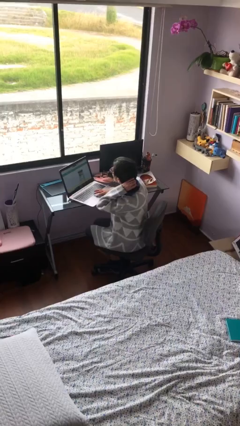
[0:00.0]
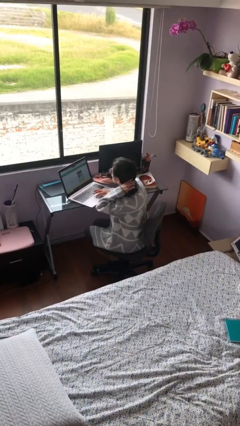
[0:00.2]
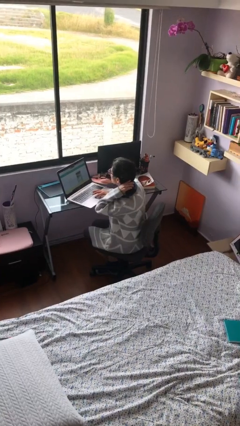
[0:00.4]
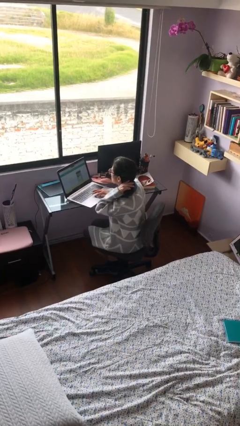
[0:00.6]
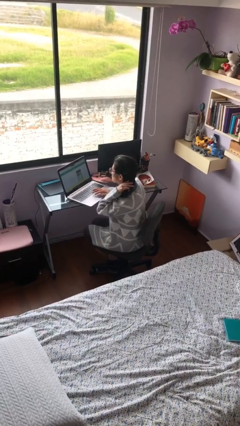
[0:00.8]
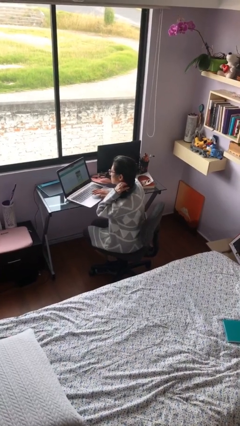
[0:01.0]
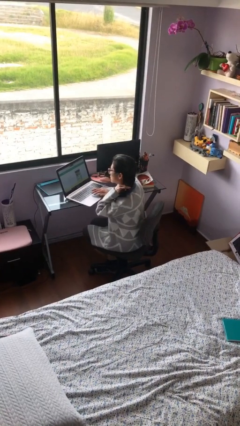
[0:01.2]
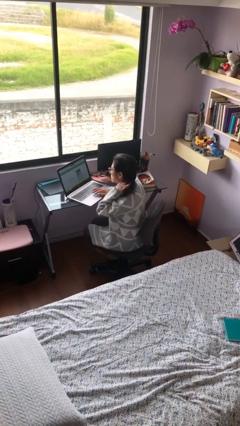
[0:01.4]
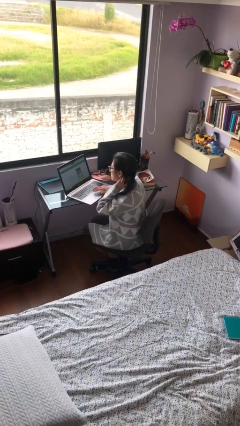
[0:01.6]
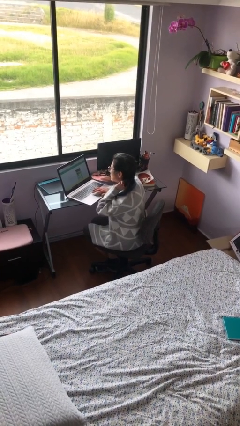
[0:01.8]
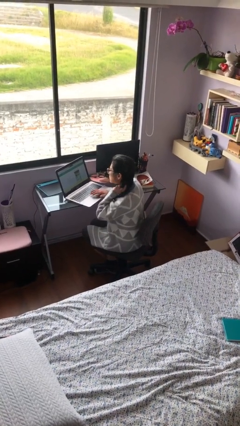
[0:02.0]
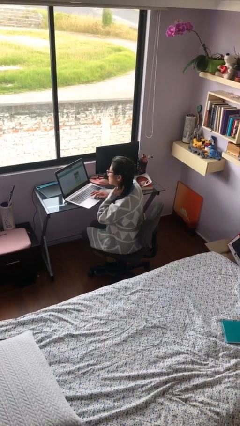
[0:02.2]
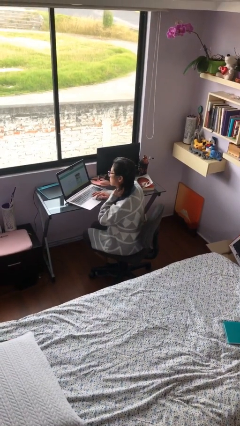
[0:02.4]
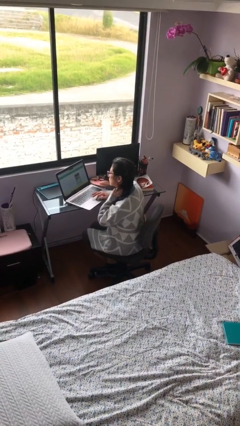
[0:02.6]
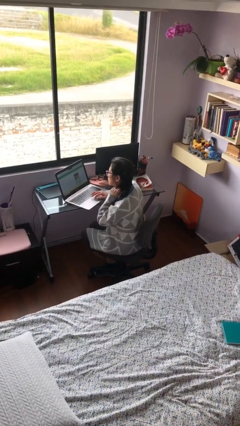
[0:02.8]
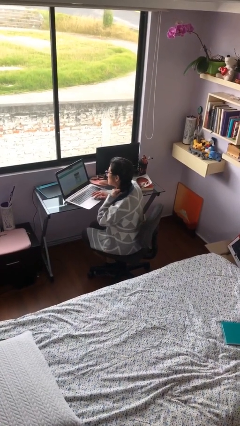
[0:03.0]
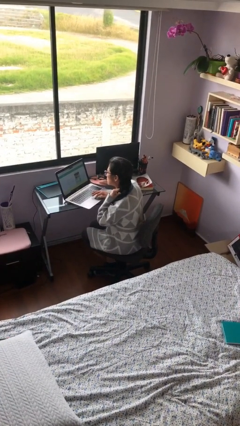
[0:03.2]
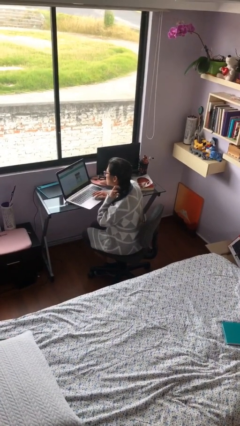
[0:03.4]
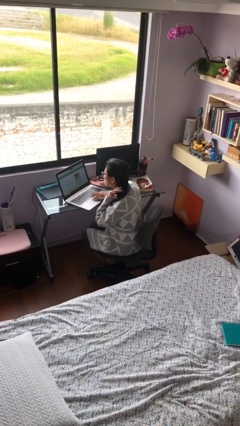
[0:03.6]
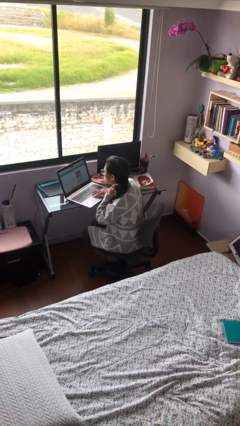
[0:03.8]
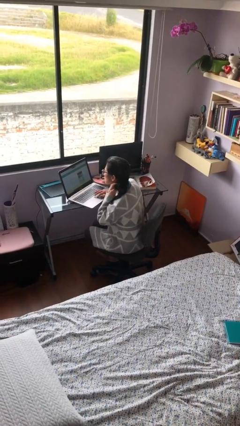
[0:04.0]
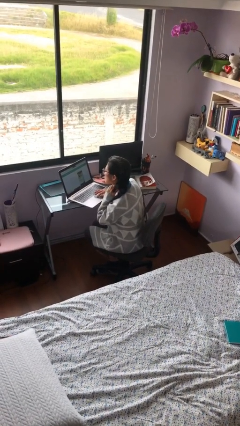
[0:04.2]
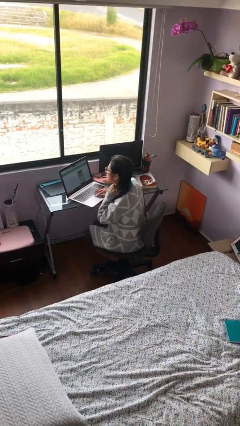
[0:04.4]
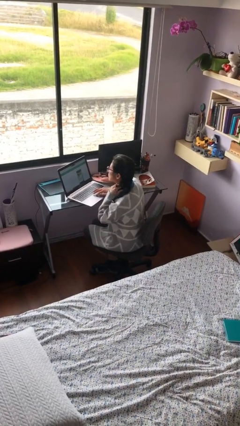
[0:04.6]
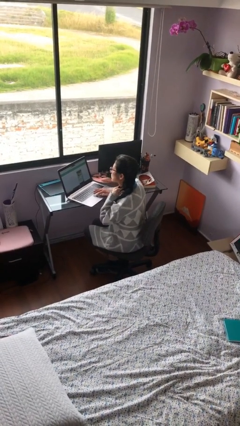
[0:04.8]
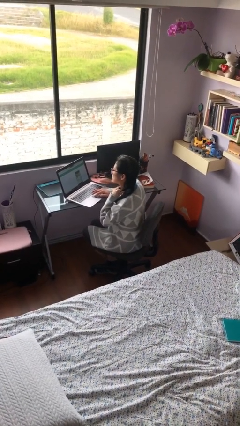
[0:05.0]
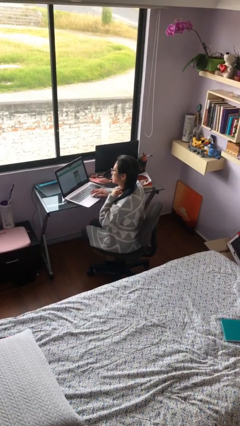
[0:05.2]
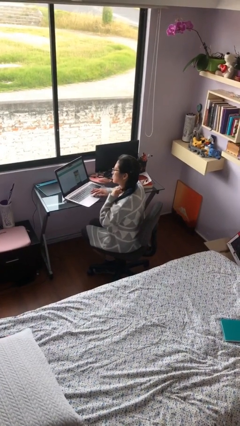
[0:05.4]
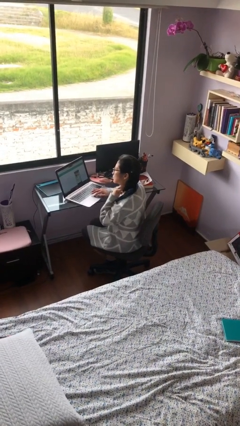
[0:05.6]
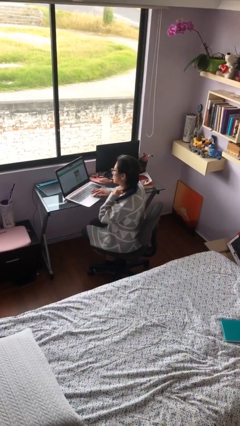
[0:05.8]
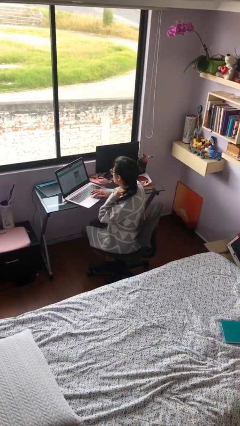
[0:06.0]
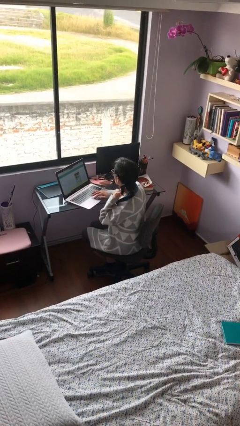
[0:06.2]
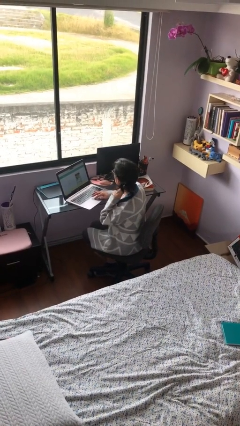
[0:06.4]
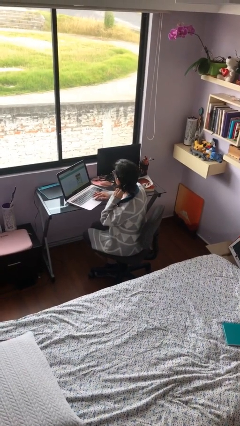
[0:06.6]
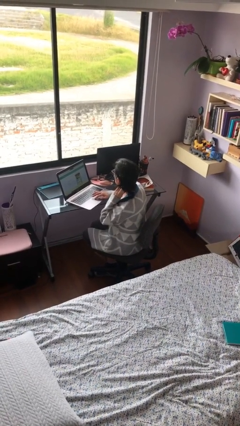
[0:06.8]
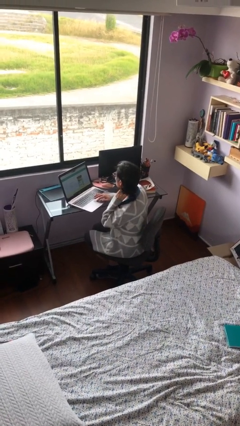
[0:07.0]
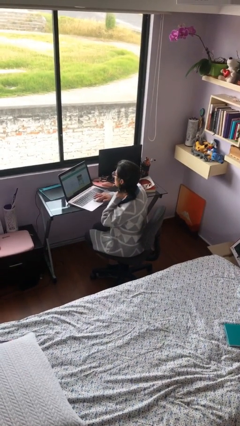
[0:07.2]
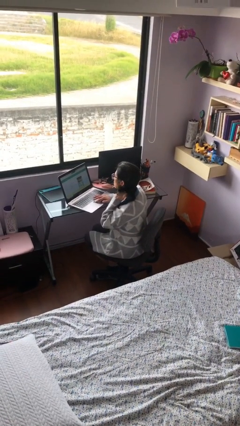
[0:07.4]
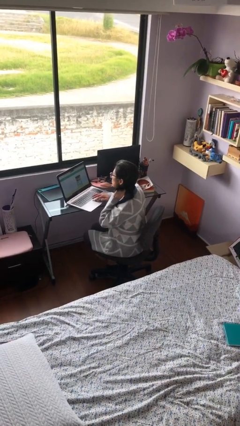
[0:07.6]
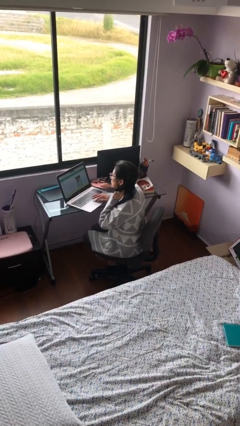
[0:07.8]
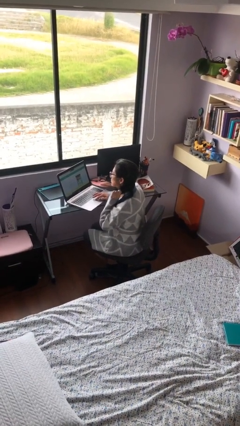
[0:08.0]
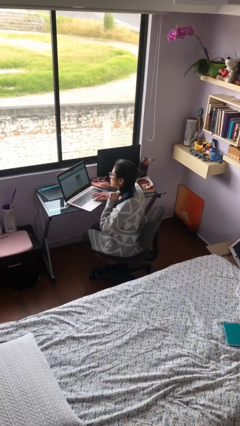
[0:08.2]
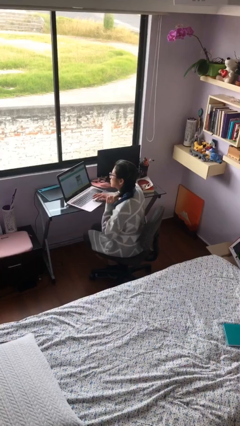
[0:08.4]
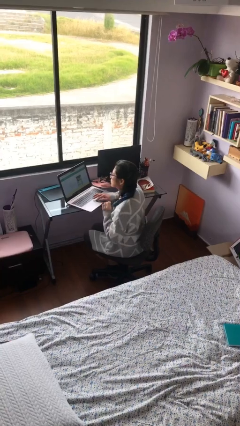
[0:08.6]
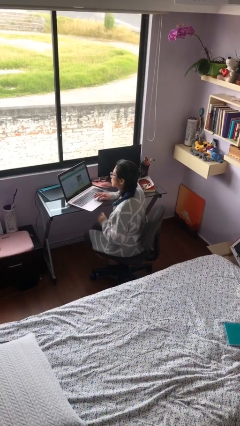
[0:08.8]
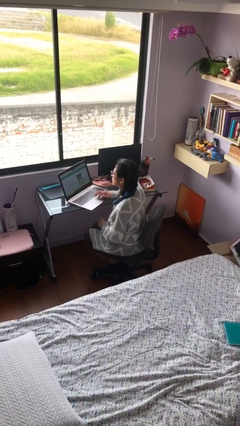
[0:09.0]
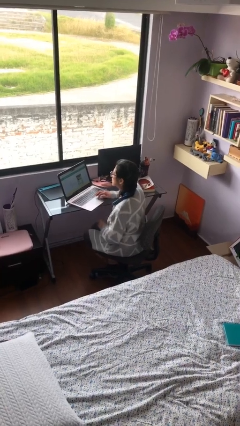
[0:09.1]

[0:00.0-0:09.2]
person interacts with laptop

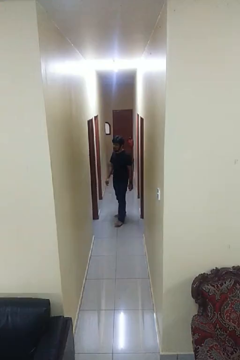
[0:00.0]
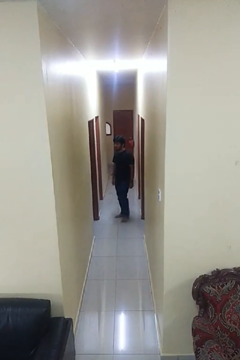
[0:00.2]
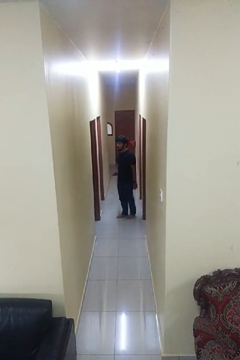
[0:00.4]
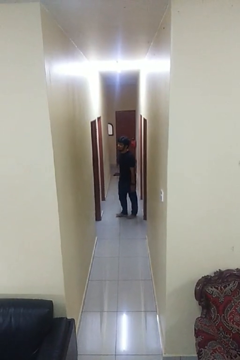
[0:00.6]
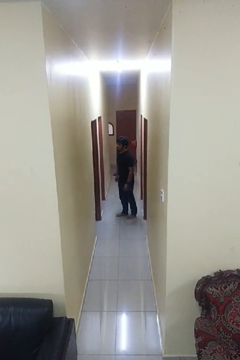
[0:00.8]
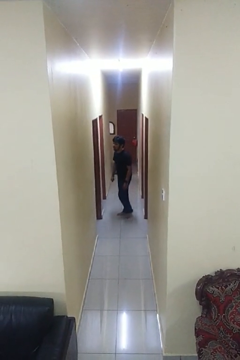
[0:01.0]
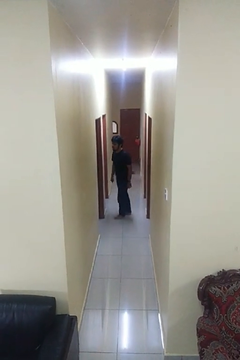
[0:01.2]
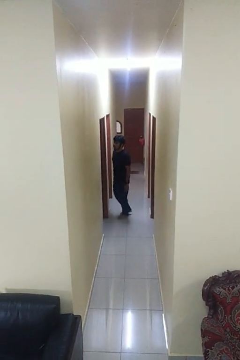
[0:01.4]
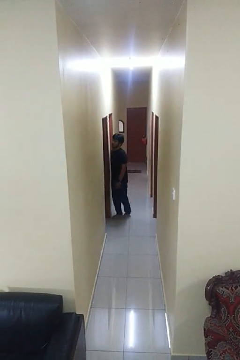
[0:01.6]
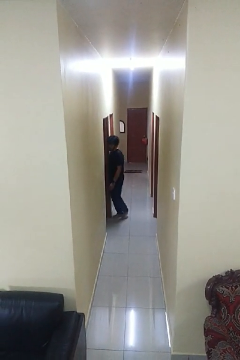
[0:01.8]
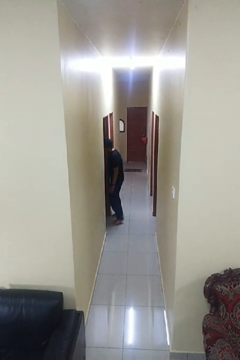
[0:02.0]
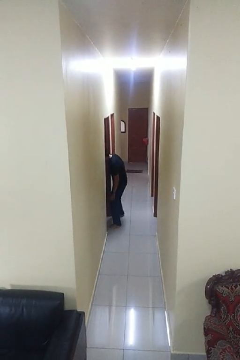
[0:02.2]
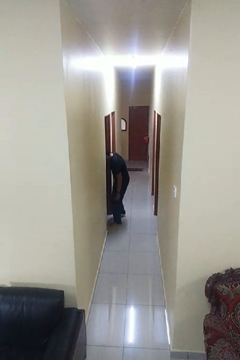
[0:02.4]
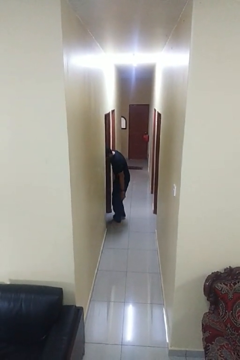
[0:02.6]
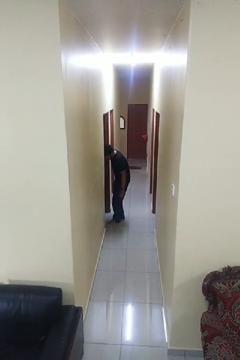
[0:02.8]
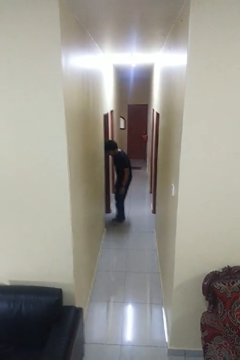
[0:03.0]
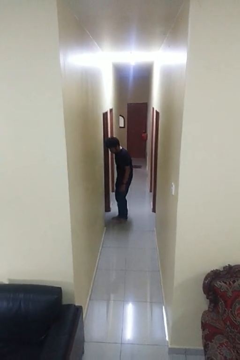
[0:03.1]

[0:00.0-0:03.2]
person bumps into wall

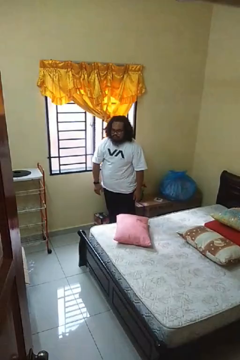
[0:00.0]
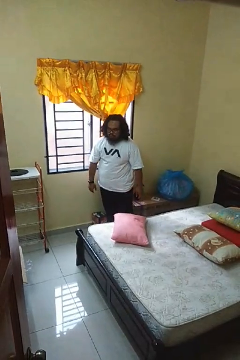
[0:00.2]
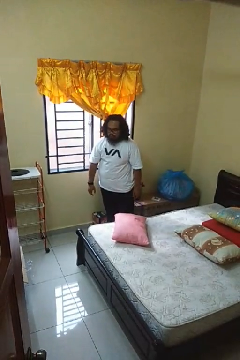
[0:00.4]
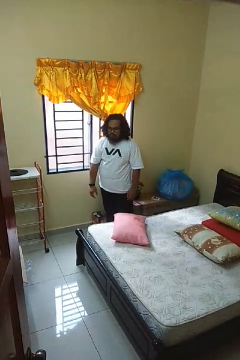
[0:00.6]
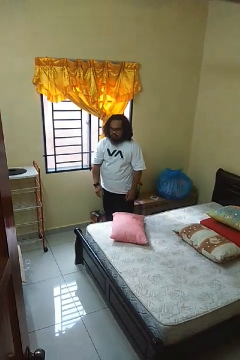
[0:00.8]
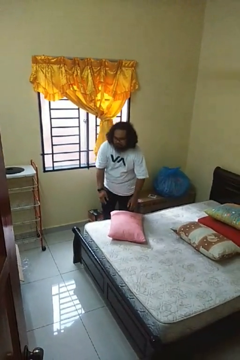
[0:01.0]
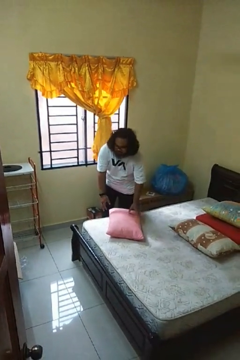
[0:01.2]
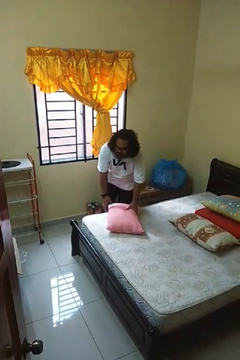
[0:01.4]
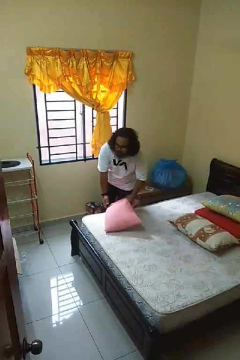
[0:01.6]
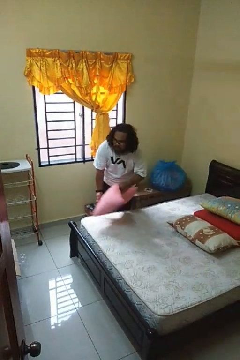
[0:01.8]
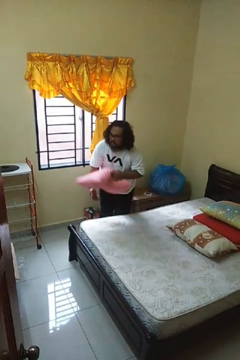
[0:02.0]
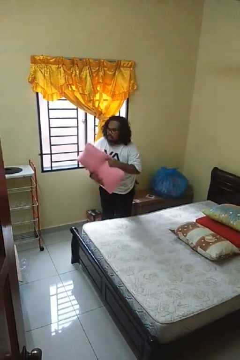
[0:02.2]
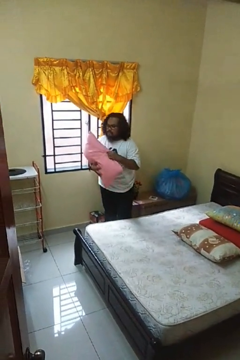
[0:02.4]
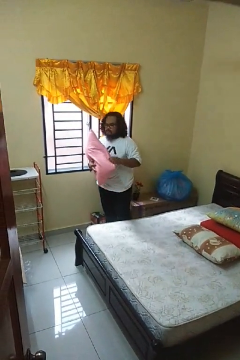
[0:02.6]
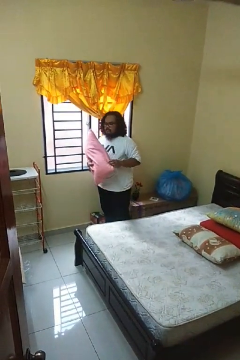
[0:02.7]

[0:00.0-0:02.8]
person picks up object from bed

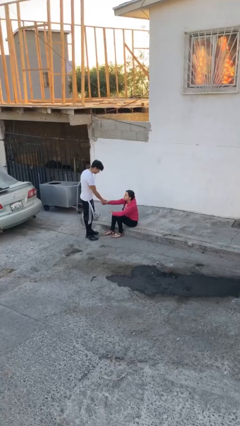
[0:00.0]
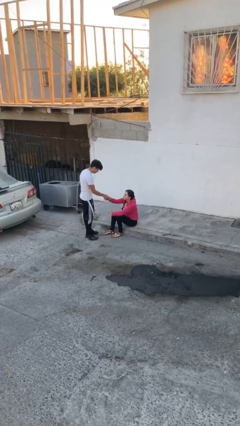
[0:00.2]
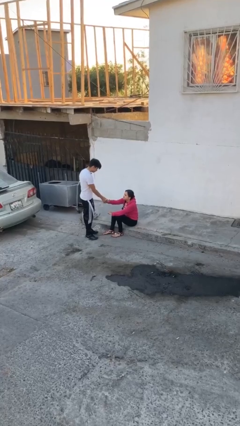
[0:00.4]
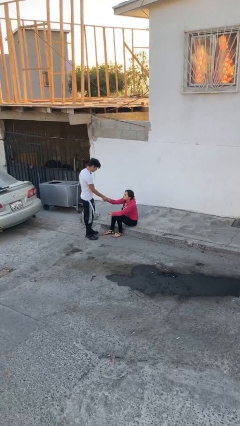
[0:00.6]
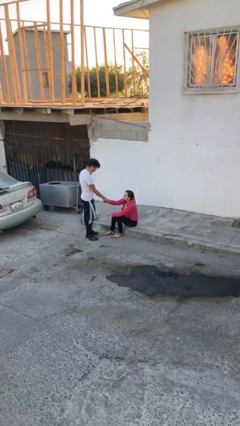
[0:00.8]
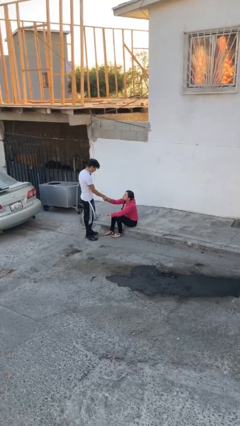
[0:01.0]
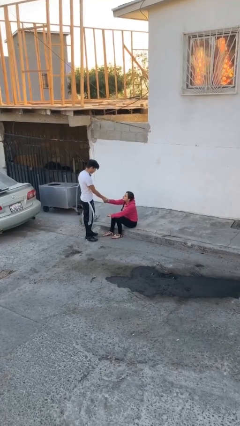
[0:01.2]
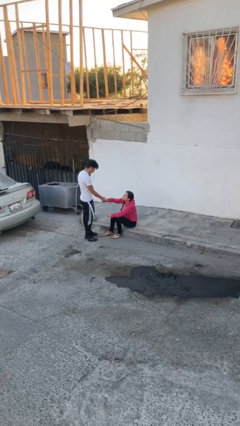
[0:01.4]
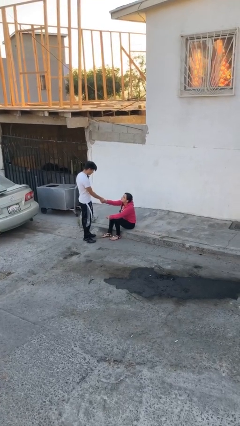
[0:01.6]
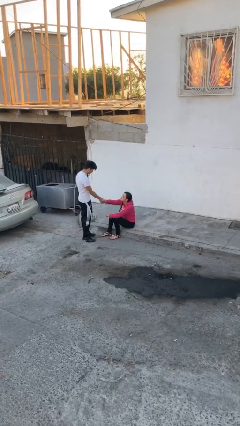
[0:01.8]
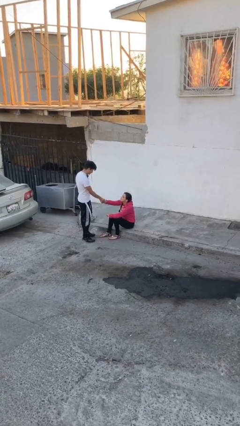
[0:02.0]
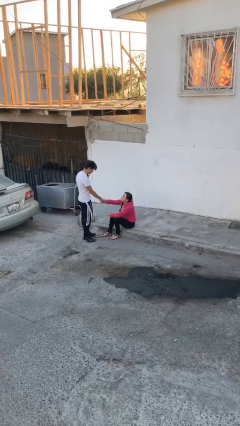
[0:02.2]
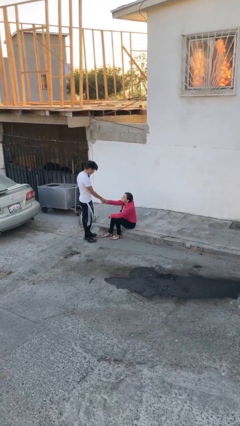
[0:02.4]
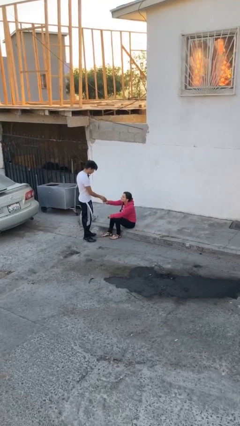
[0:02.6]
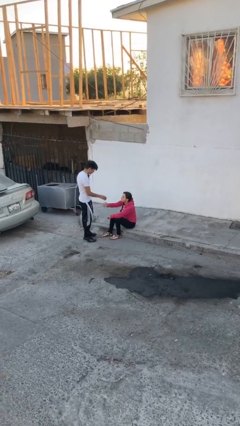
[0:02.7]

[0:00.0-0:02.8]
person shakes hand

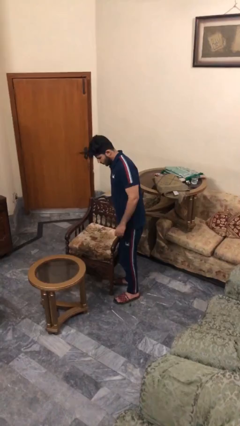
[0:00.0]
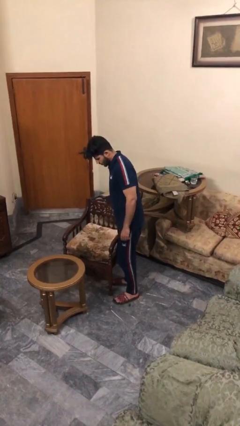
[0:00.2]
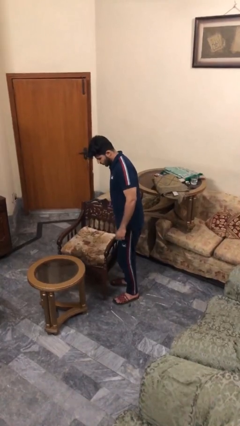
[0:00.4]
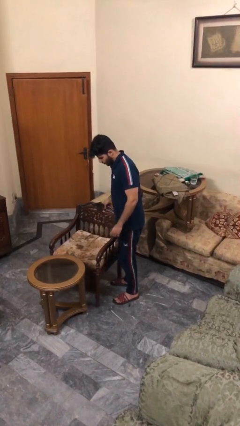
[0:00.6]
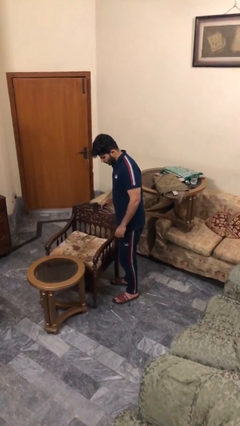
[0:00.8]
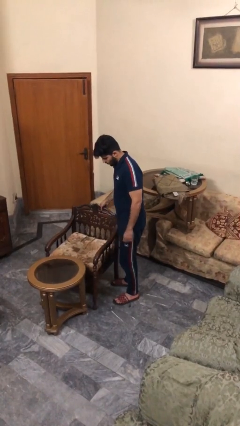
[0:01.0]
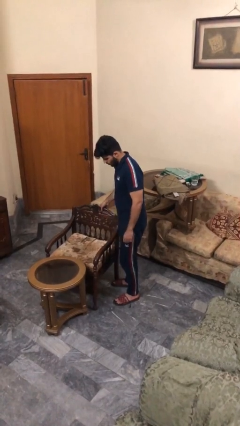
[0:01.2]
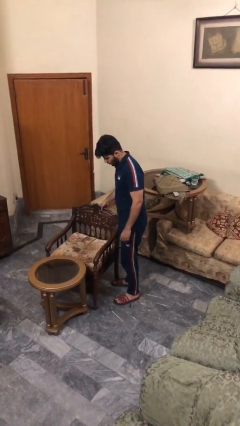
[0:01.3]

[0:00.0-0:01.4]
person pushes in chair
